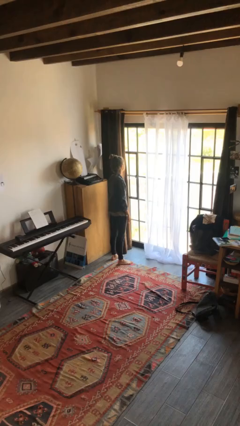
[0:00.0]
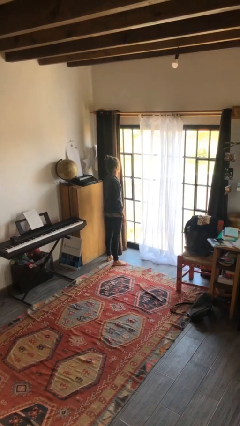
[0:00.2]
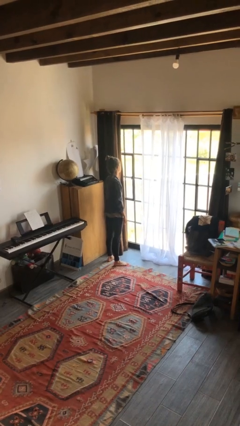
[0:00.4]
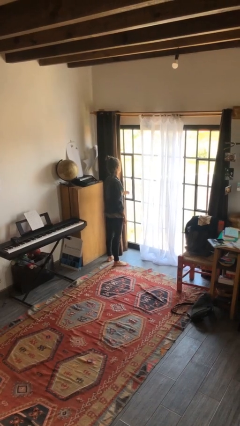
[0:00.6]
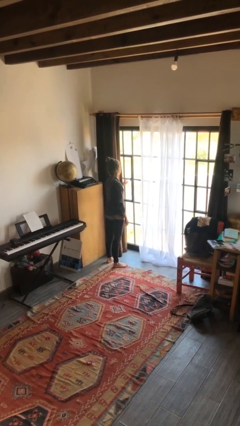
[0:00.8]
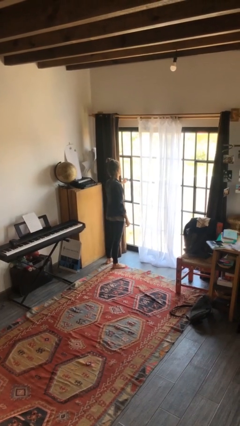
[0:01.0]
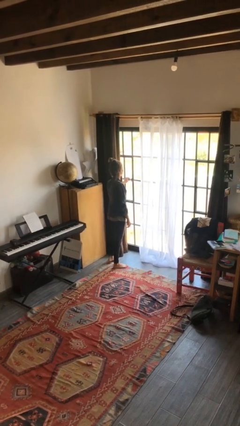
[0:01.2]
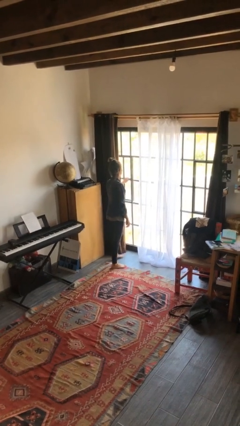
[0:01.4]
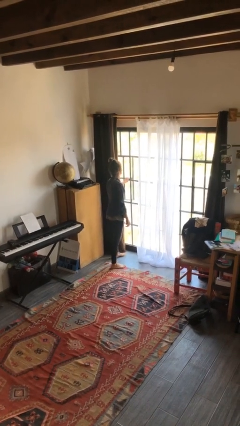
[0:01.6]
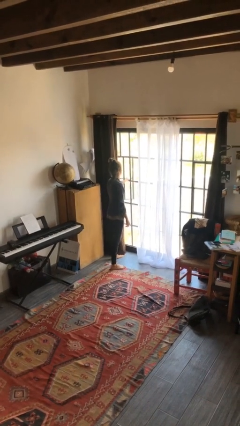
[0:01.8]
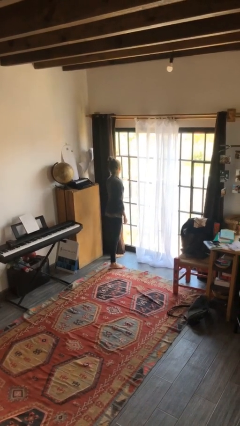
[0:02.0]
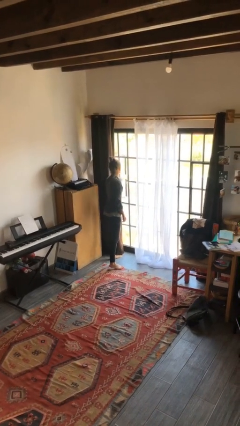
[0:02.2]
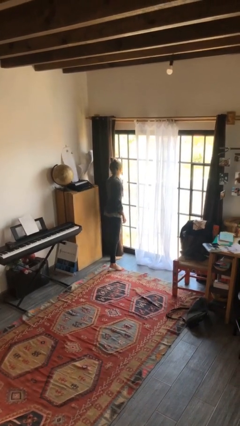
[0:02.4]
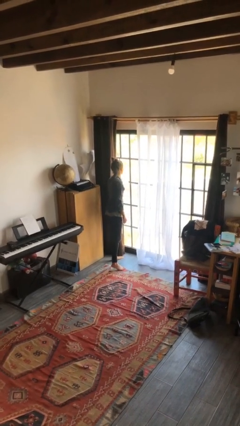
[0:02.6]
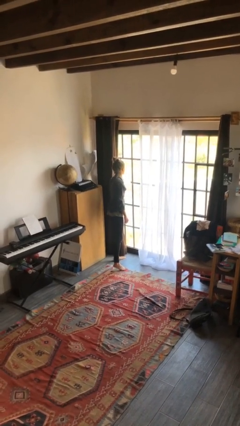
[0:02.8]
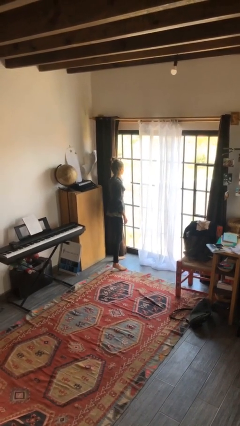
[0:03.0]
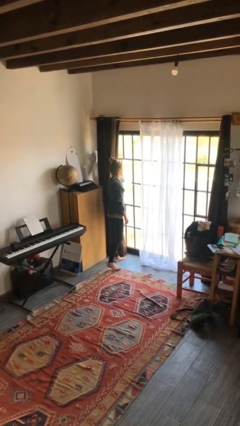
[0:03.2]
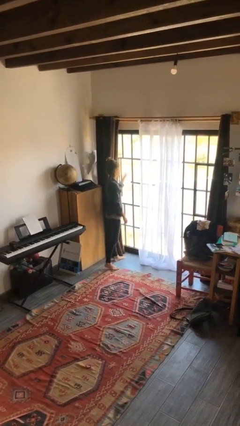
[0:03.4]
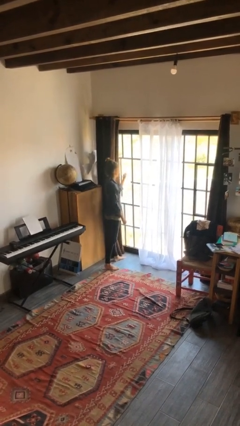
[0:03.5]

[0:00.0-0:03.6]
person opens home window

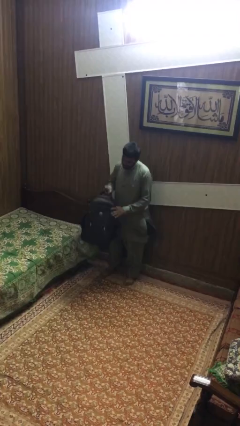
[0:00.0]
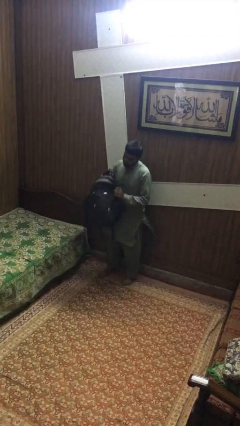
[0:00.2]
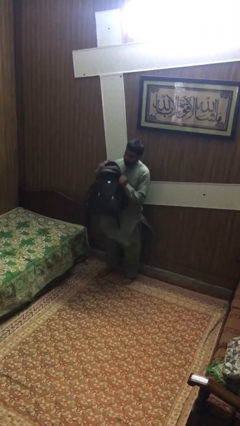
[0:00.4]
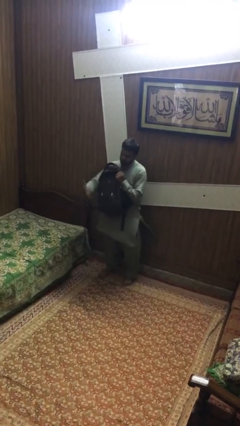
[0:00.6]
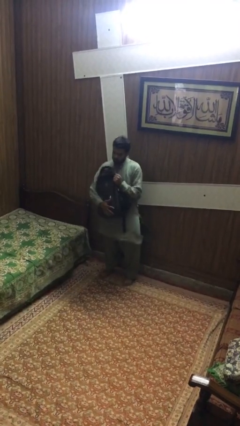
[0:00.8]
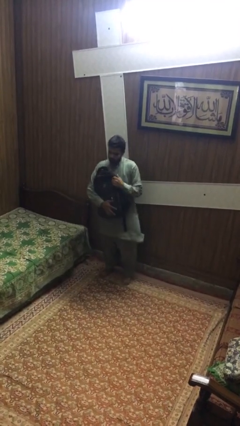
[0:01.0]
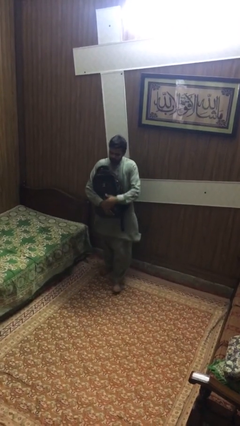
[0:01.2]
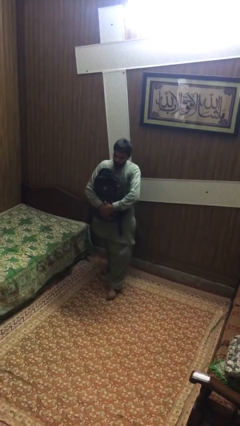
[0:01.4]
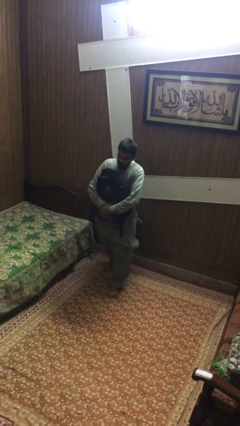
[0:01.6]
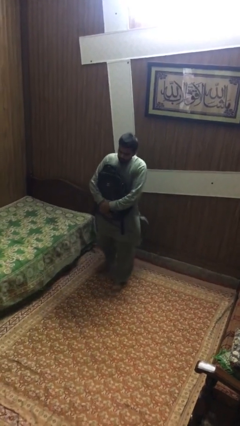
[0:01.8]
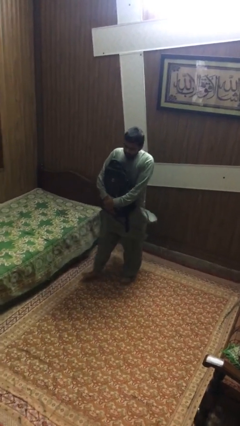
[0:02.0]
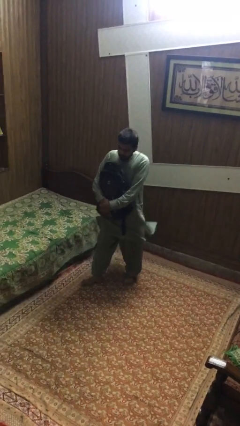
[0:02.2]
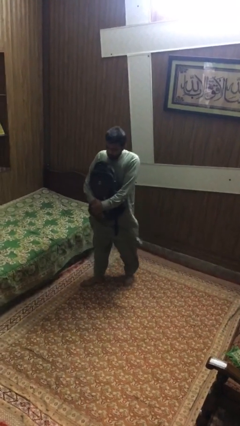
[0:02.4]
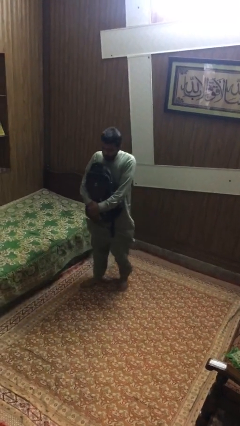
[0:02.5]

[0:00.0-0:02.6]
person picks up object from floor

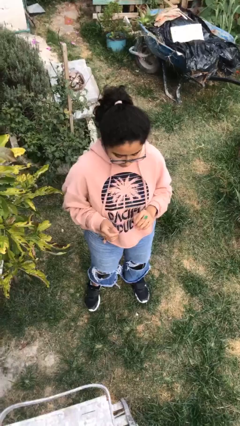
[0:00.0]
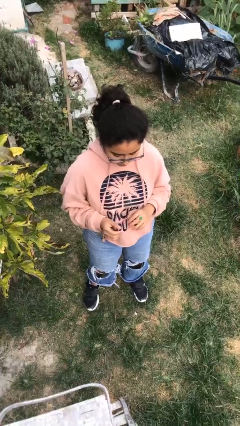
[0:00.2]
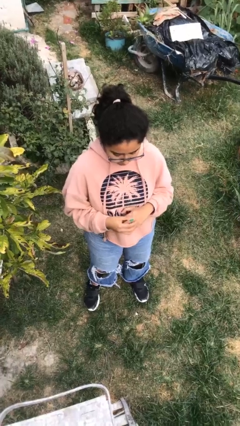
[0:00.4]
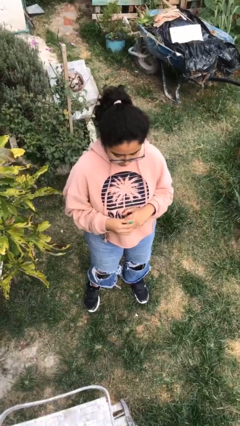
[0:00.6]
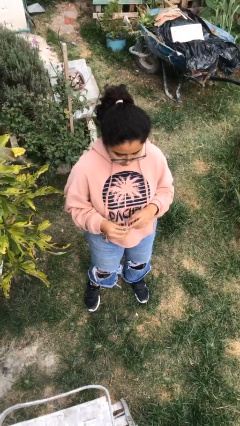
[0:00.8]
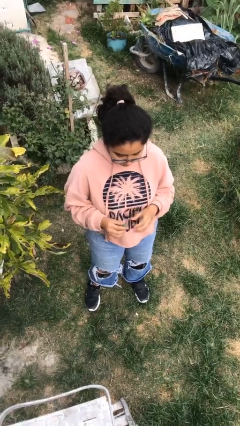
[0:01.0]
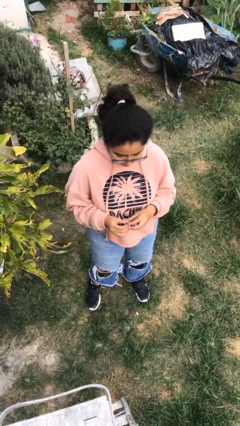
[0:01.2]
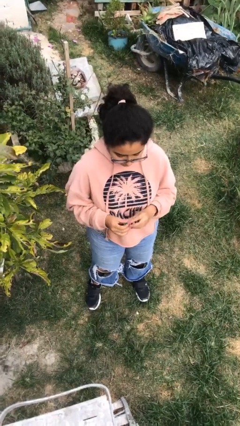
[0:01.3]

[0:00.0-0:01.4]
person takes off ring

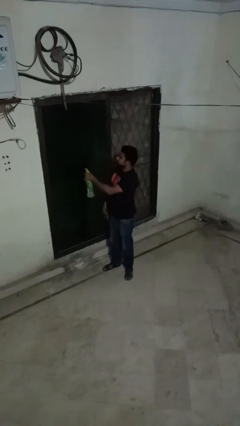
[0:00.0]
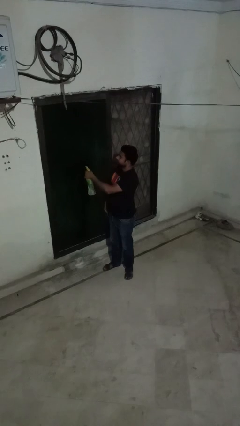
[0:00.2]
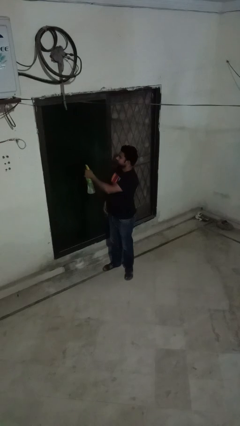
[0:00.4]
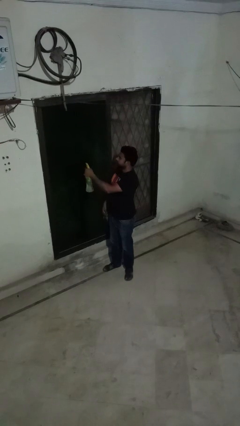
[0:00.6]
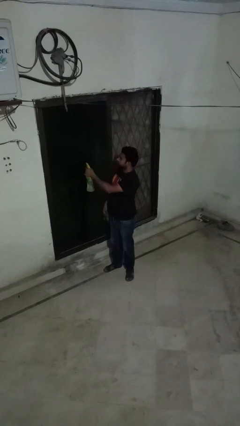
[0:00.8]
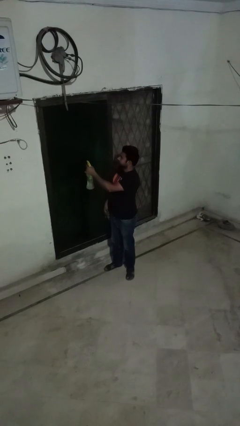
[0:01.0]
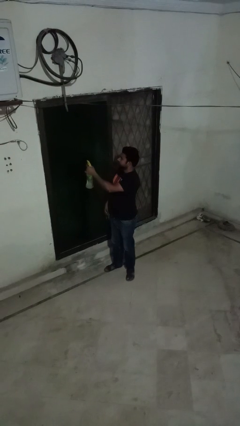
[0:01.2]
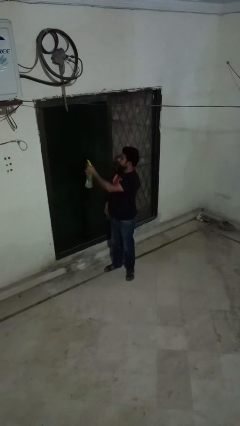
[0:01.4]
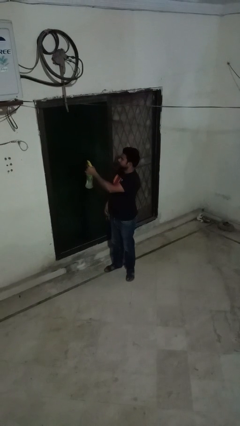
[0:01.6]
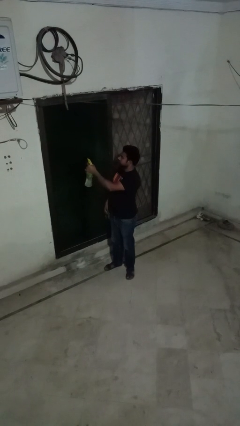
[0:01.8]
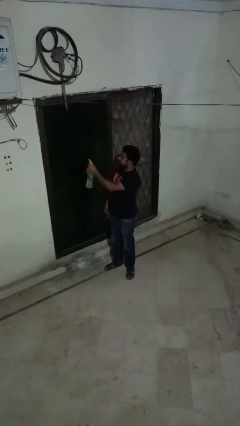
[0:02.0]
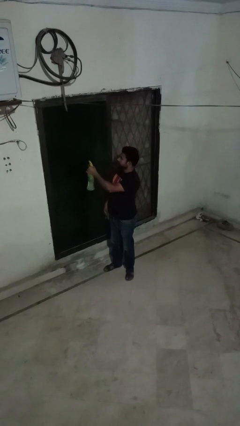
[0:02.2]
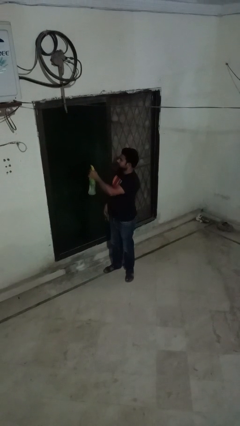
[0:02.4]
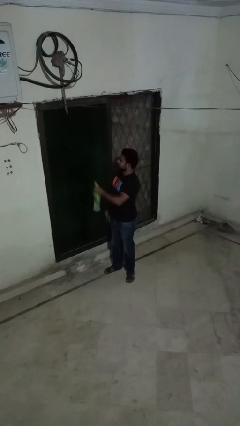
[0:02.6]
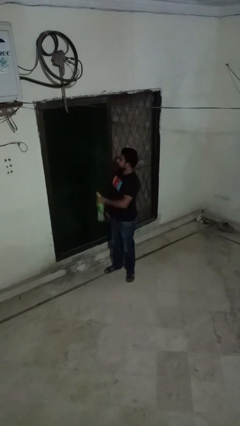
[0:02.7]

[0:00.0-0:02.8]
person sprays from bottle

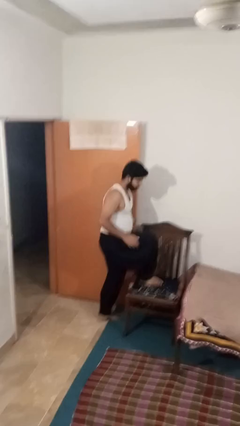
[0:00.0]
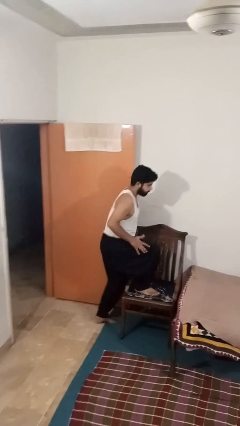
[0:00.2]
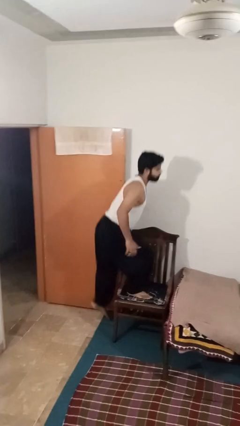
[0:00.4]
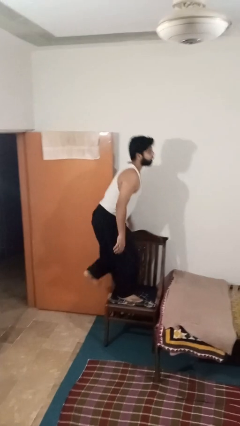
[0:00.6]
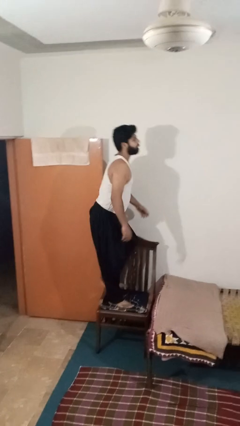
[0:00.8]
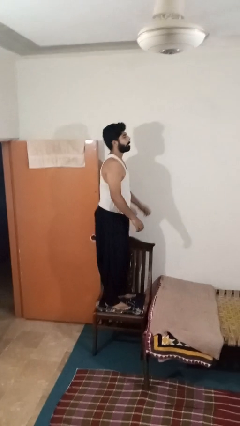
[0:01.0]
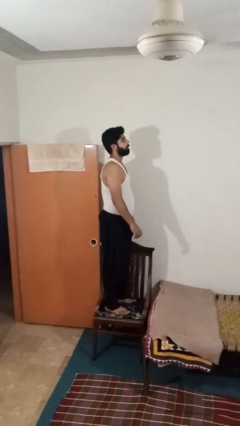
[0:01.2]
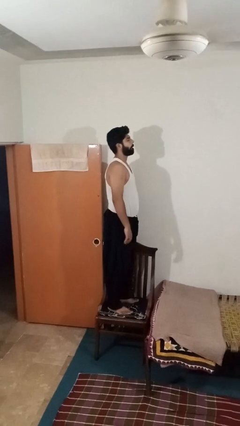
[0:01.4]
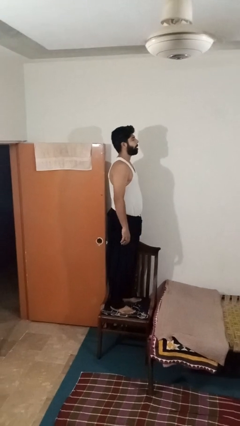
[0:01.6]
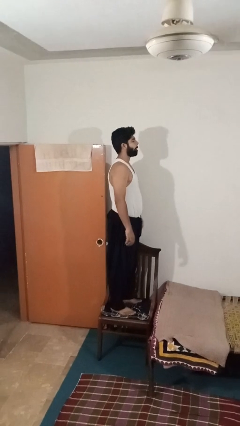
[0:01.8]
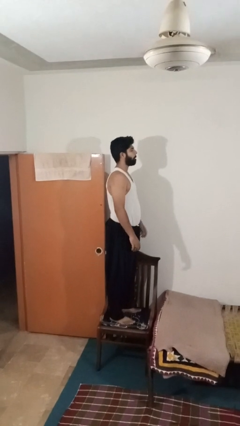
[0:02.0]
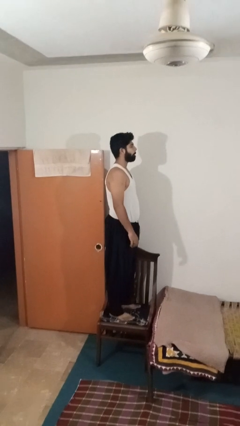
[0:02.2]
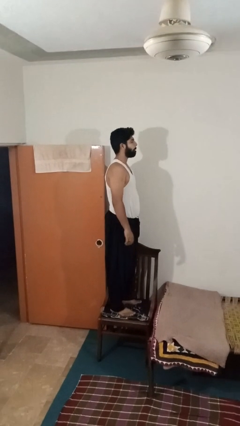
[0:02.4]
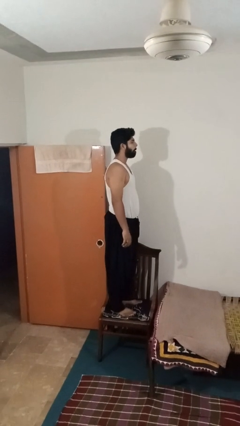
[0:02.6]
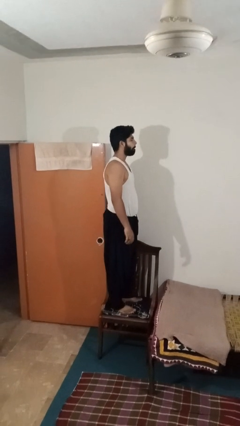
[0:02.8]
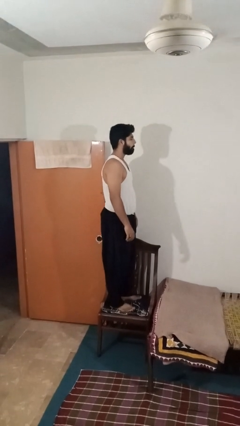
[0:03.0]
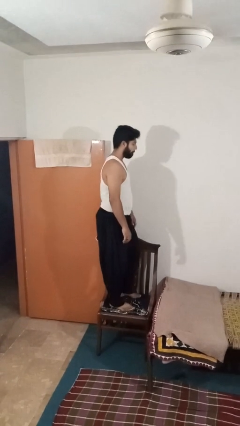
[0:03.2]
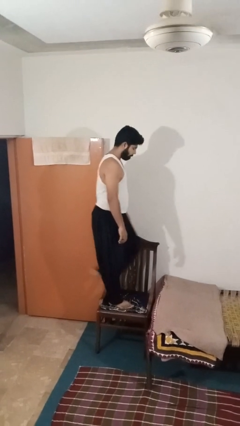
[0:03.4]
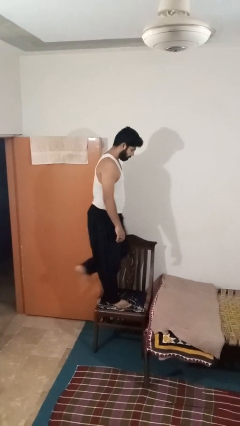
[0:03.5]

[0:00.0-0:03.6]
person climbs on chair

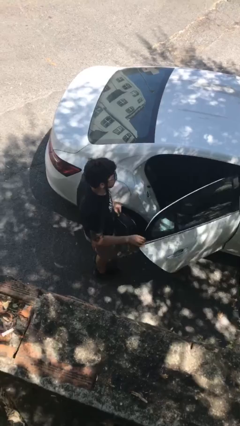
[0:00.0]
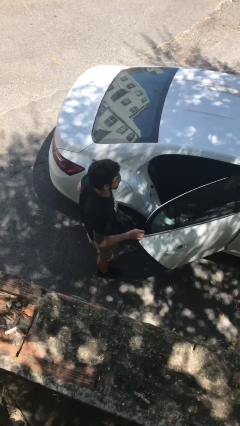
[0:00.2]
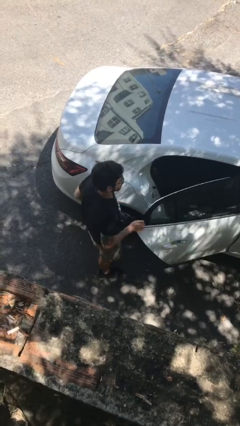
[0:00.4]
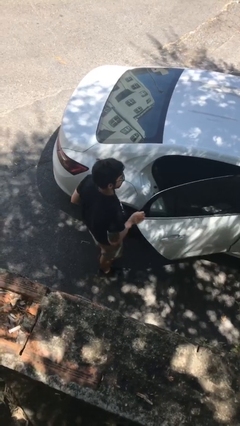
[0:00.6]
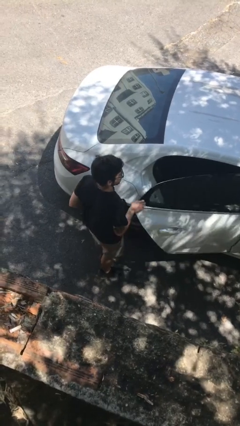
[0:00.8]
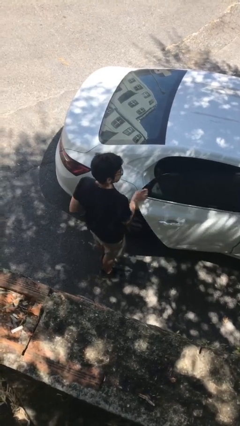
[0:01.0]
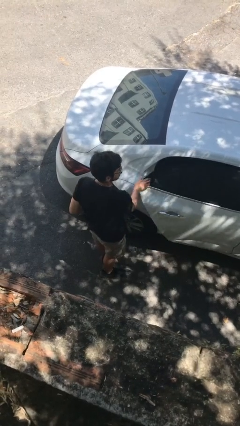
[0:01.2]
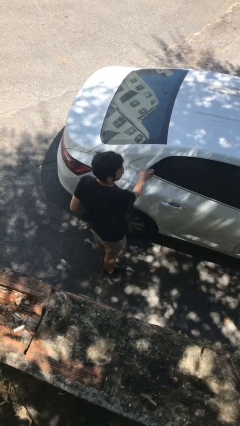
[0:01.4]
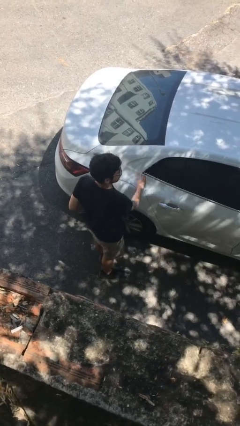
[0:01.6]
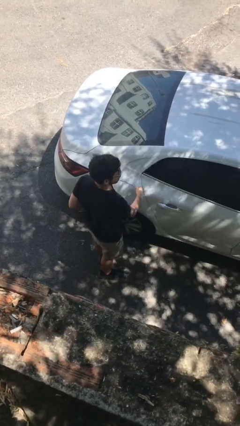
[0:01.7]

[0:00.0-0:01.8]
person closes car door

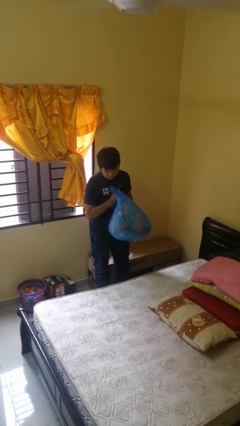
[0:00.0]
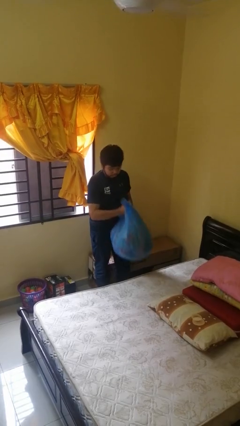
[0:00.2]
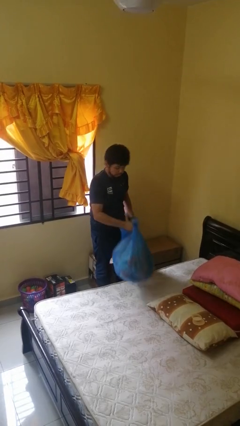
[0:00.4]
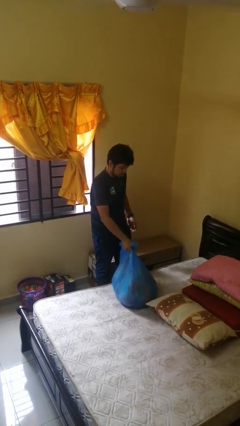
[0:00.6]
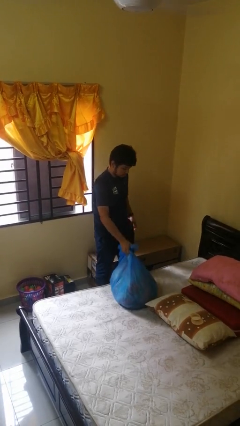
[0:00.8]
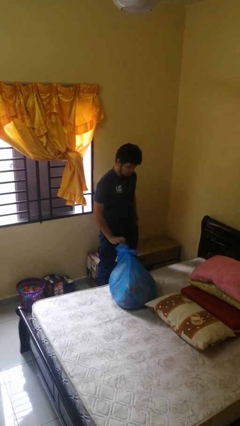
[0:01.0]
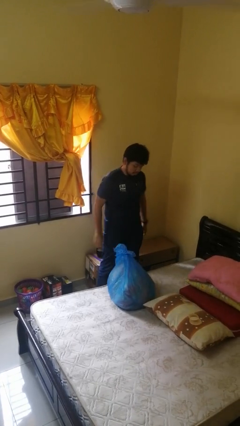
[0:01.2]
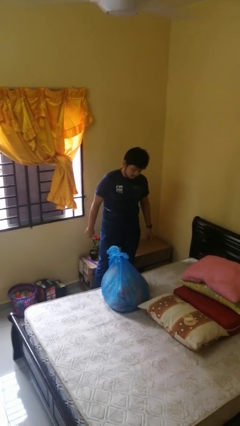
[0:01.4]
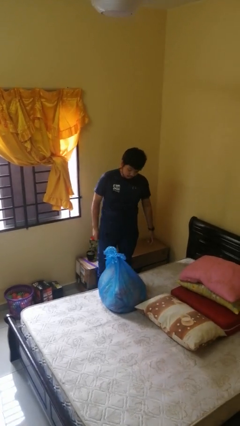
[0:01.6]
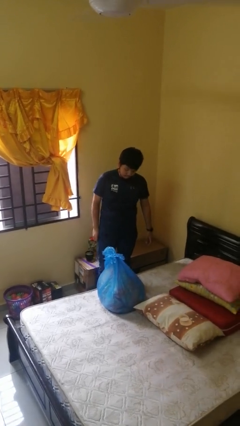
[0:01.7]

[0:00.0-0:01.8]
person puts down object on bed
